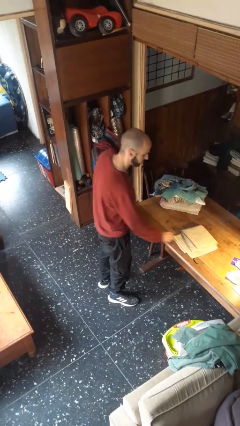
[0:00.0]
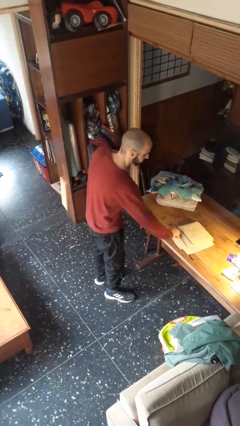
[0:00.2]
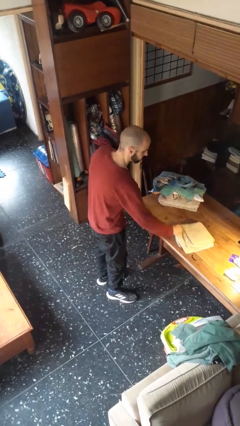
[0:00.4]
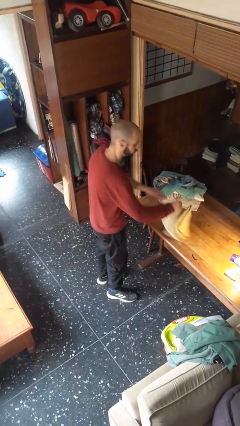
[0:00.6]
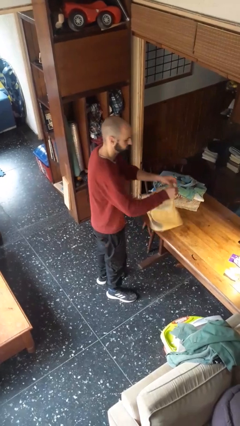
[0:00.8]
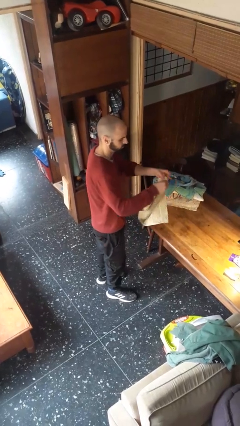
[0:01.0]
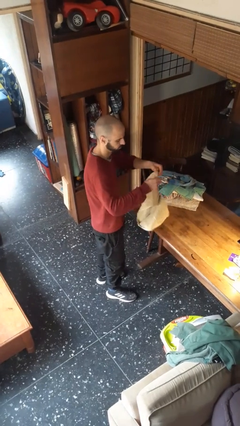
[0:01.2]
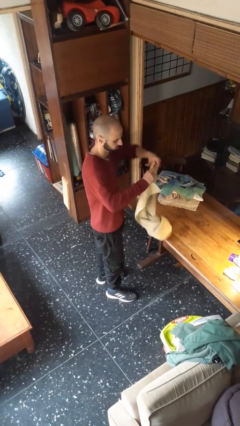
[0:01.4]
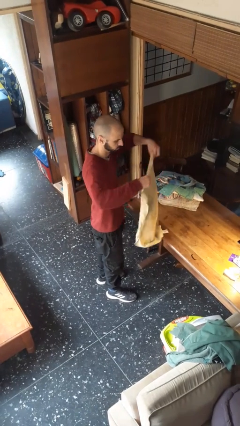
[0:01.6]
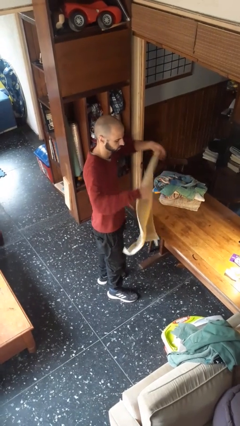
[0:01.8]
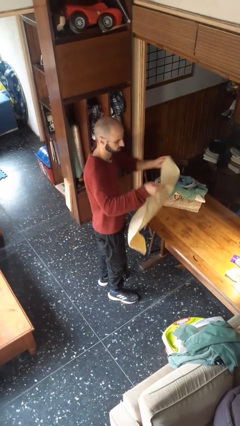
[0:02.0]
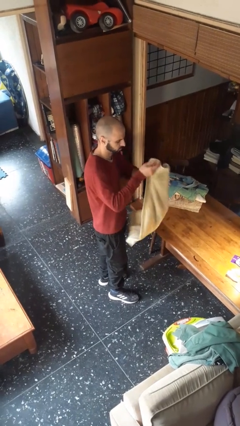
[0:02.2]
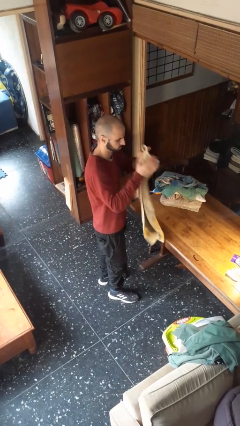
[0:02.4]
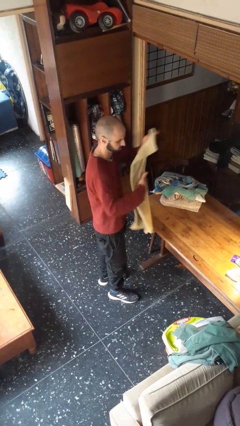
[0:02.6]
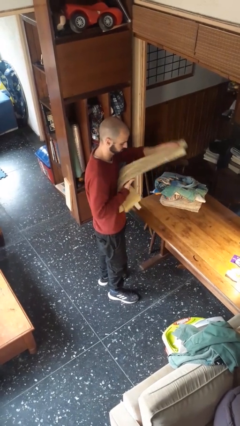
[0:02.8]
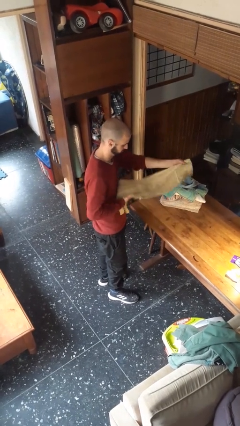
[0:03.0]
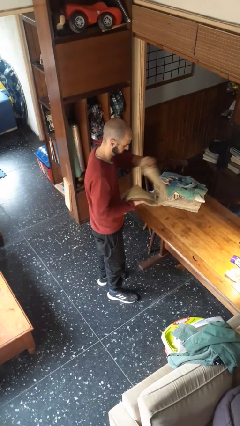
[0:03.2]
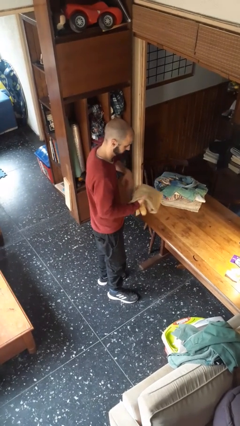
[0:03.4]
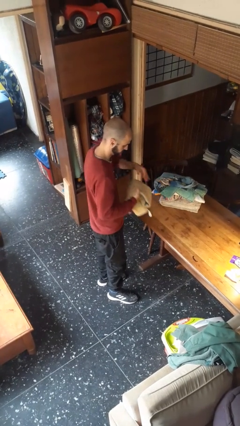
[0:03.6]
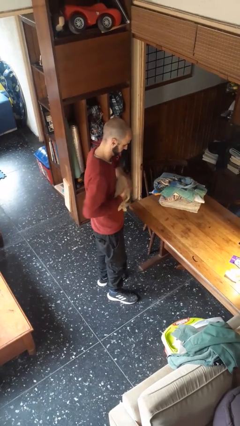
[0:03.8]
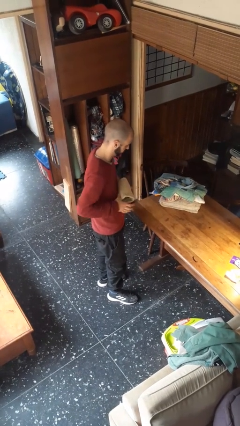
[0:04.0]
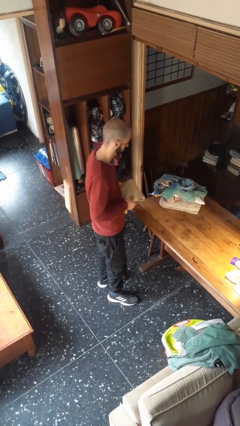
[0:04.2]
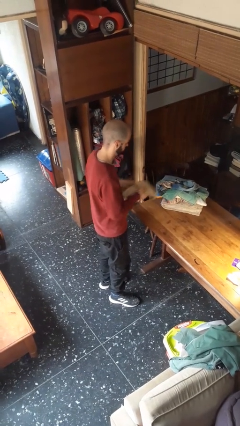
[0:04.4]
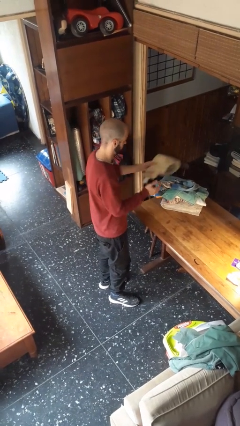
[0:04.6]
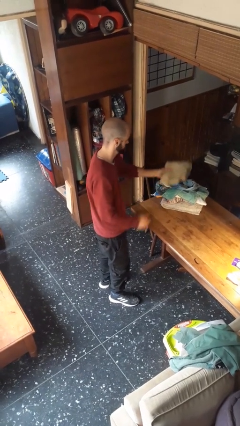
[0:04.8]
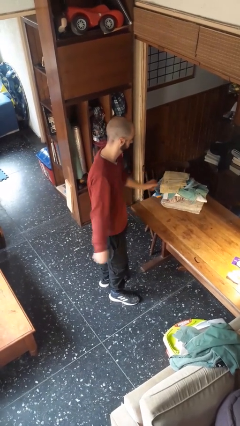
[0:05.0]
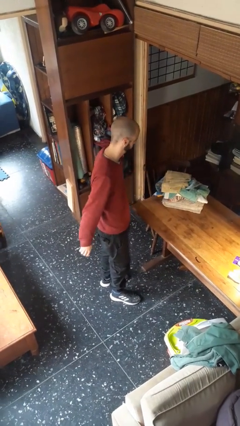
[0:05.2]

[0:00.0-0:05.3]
person folds towel

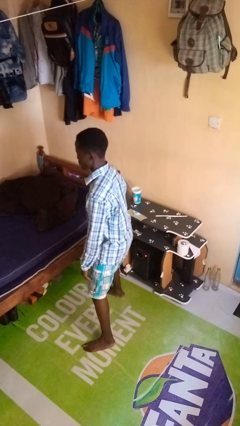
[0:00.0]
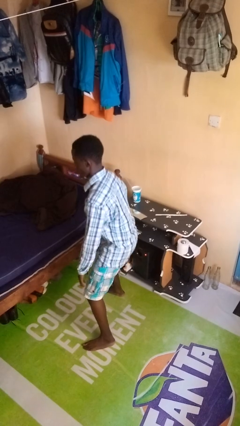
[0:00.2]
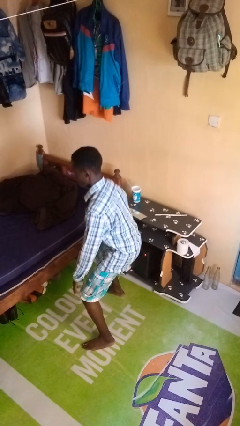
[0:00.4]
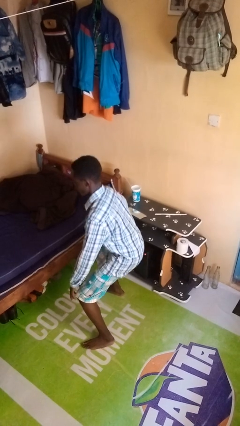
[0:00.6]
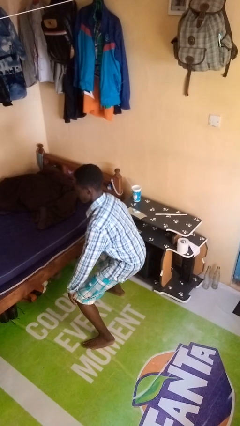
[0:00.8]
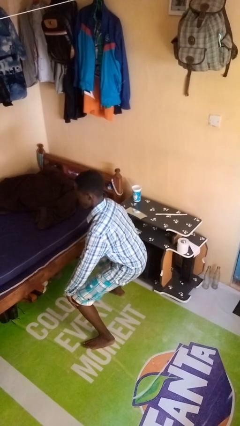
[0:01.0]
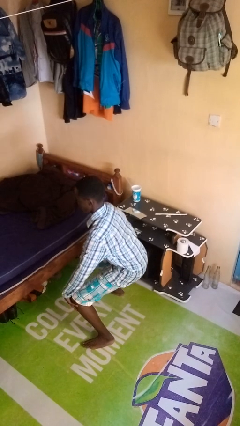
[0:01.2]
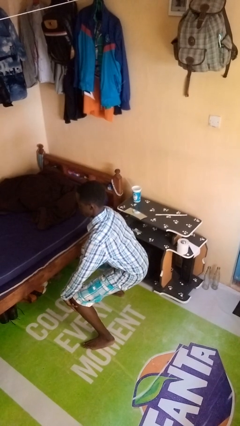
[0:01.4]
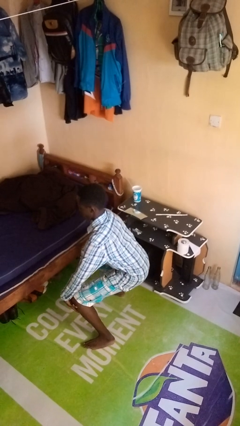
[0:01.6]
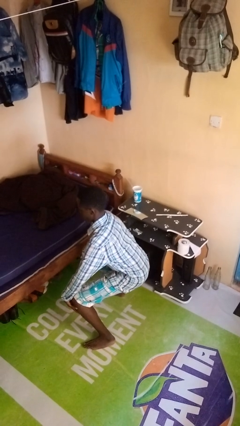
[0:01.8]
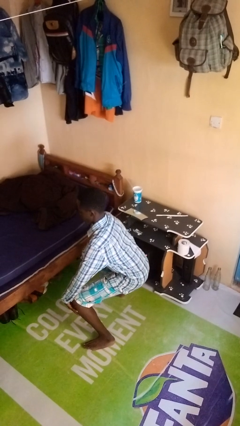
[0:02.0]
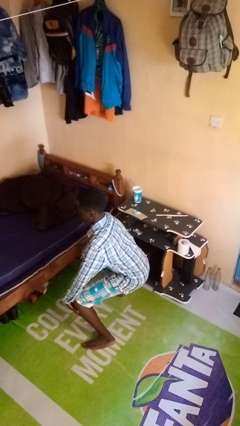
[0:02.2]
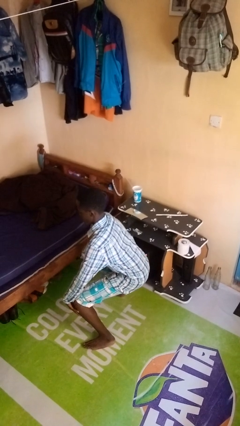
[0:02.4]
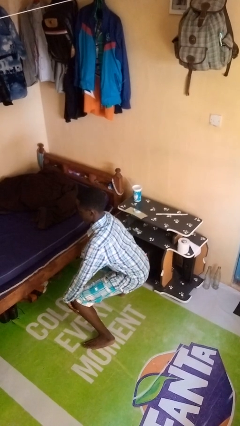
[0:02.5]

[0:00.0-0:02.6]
person squats

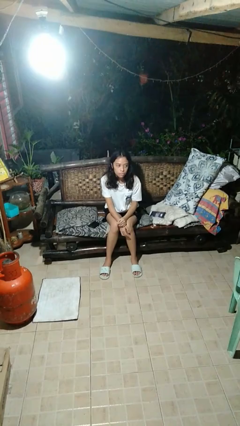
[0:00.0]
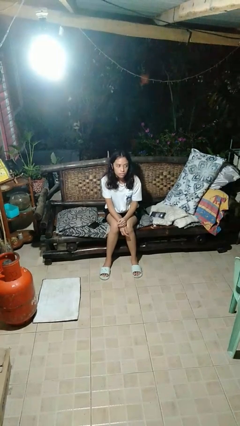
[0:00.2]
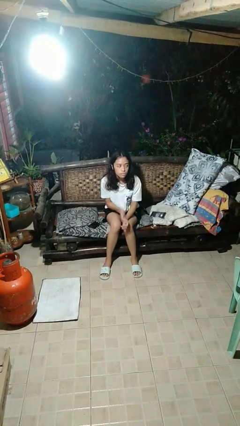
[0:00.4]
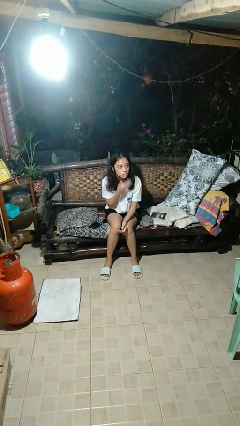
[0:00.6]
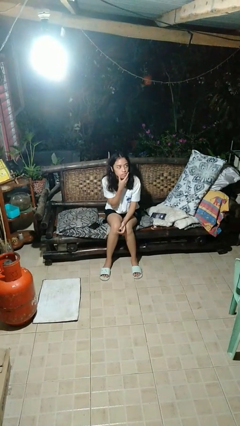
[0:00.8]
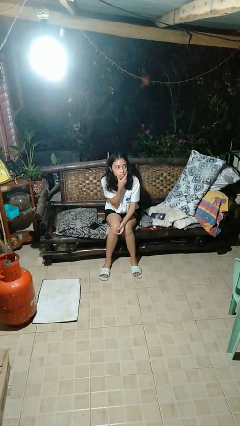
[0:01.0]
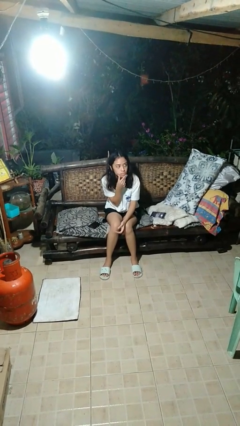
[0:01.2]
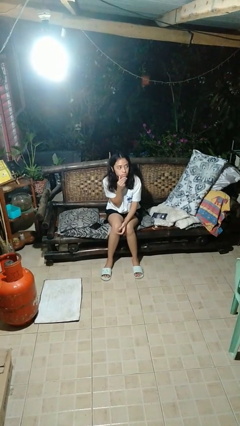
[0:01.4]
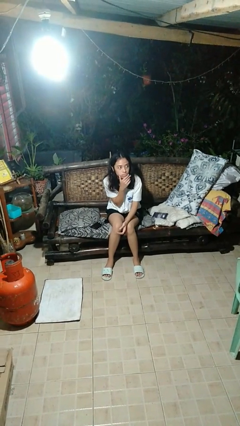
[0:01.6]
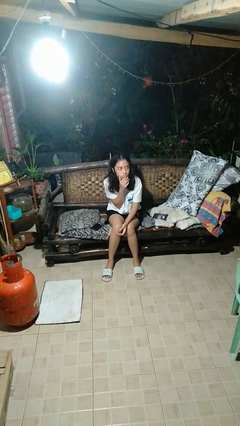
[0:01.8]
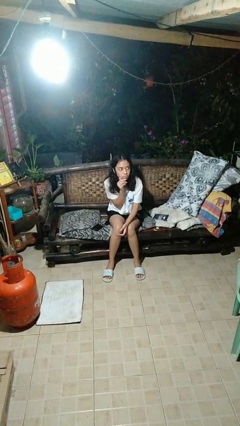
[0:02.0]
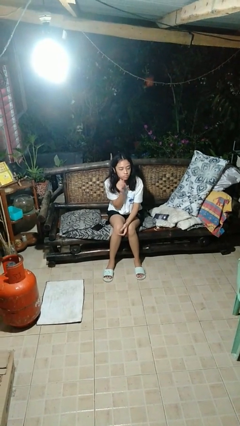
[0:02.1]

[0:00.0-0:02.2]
person strokes chin

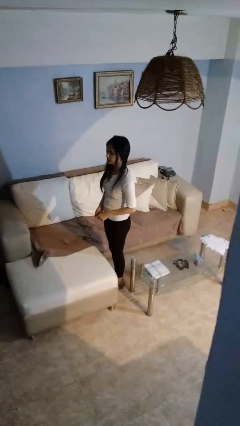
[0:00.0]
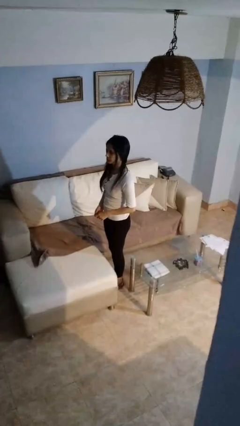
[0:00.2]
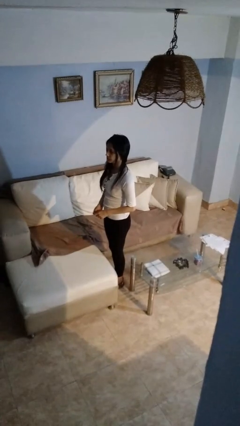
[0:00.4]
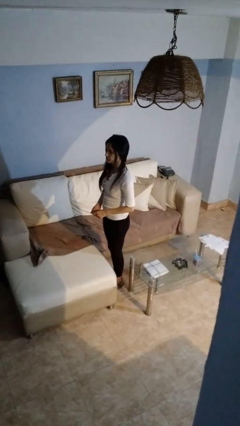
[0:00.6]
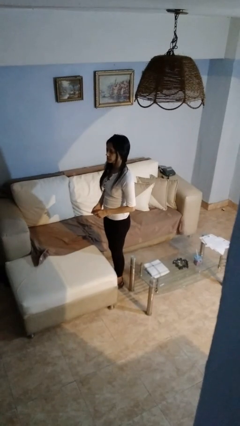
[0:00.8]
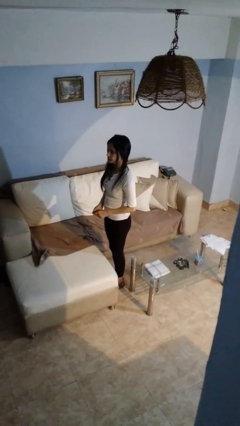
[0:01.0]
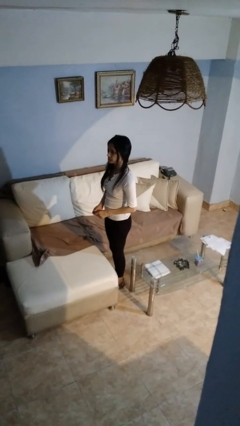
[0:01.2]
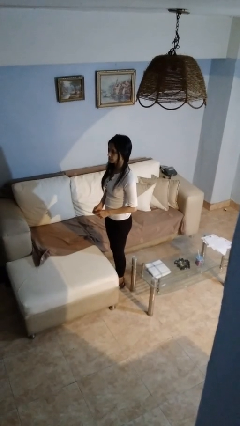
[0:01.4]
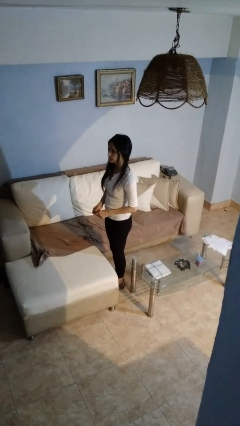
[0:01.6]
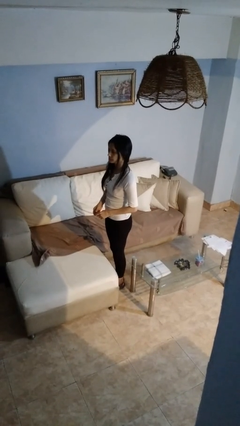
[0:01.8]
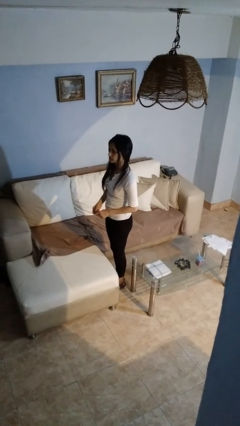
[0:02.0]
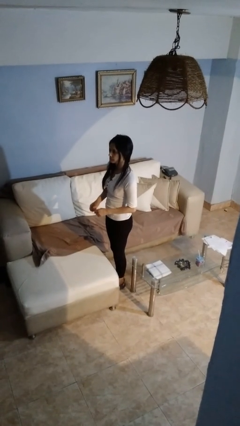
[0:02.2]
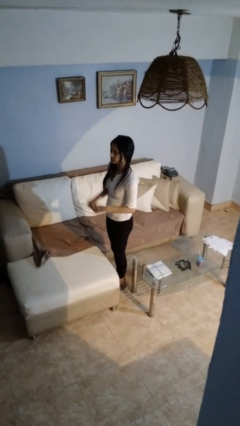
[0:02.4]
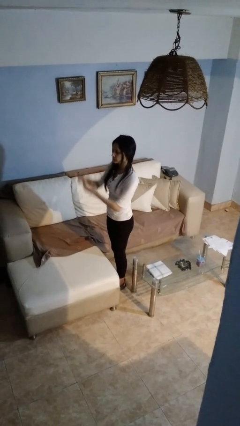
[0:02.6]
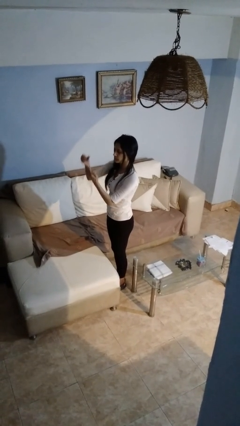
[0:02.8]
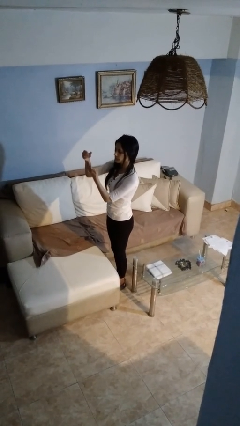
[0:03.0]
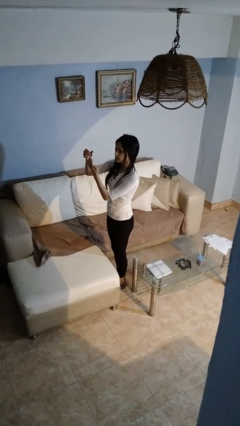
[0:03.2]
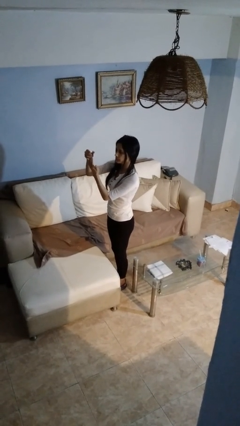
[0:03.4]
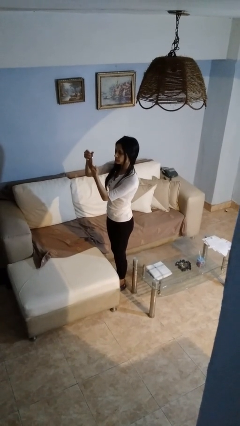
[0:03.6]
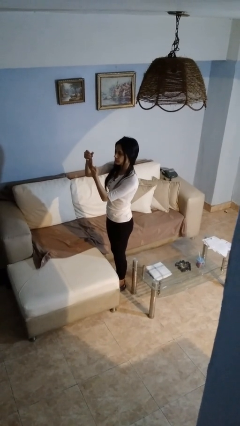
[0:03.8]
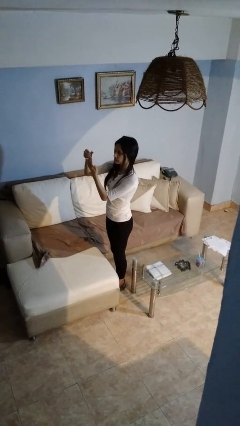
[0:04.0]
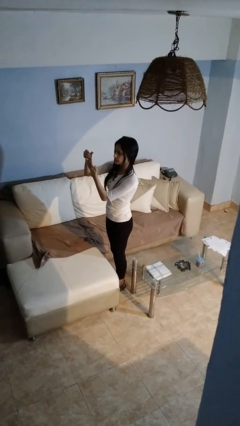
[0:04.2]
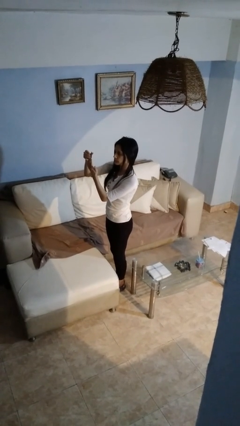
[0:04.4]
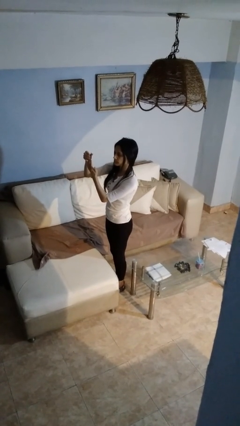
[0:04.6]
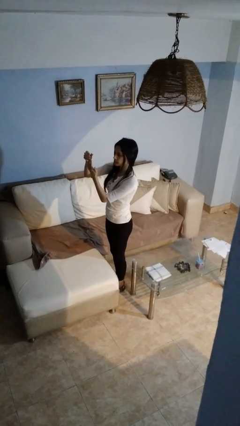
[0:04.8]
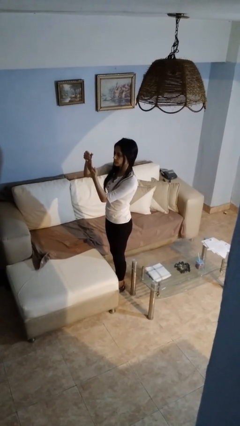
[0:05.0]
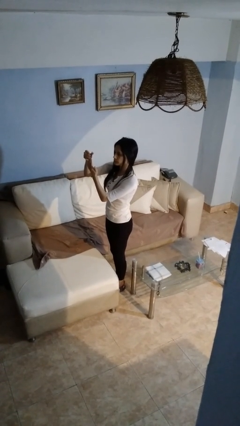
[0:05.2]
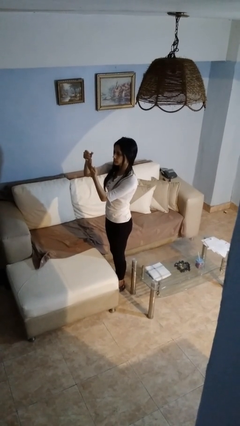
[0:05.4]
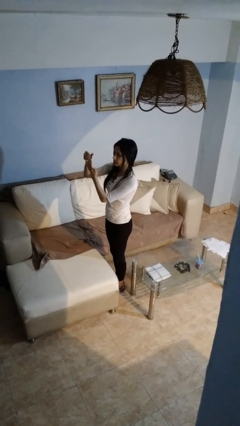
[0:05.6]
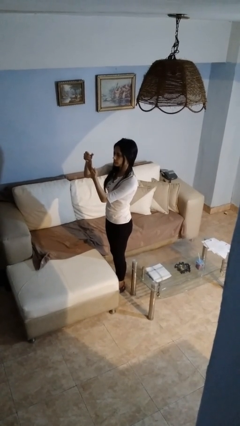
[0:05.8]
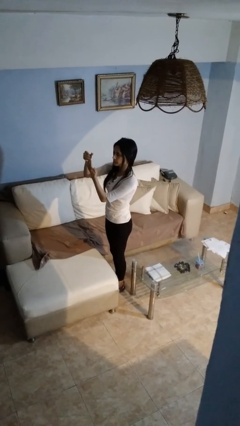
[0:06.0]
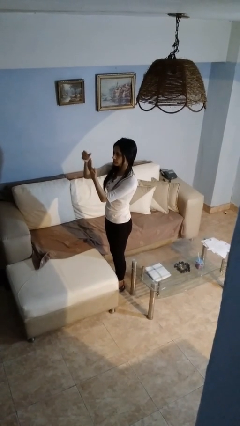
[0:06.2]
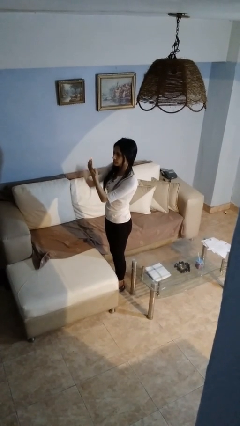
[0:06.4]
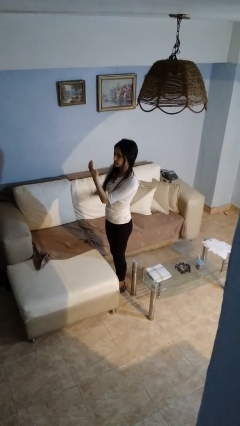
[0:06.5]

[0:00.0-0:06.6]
person clips fingernails

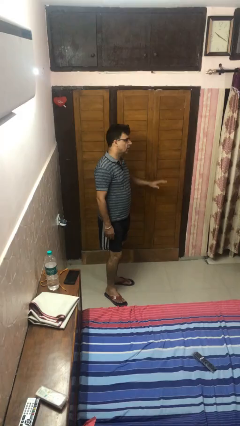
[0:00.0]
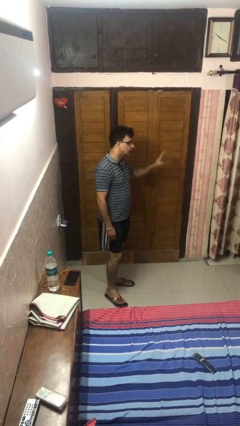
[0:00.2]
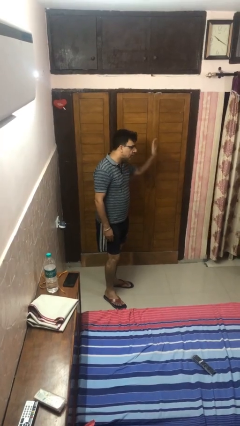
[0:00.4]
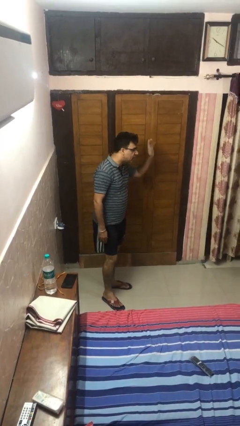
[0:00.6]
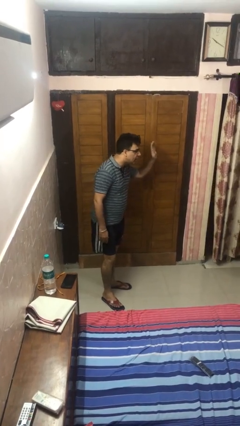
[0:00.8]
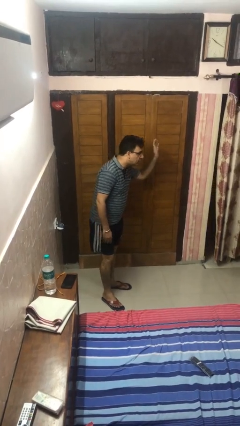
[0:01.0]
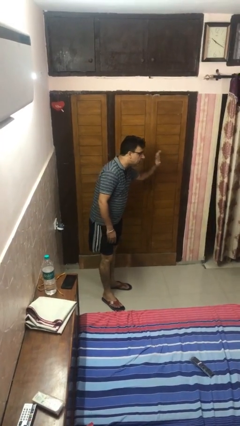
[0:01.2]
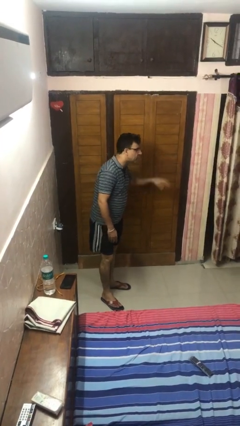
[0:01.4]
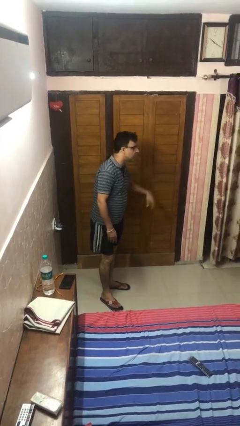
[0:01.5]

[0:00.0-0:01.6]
person waves at person
